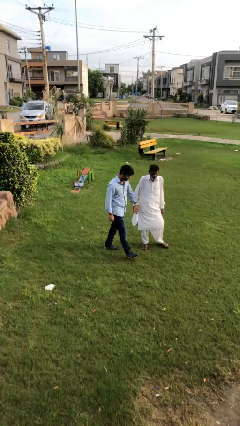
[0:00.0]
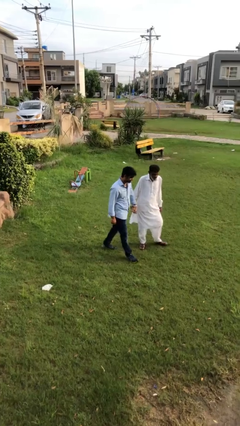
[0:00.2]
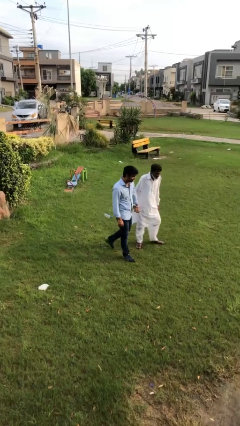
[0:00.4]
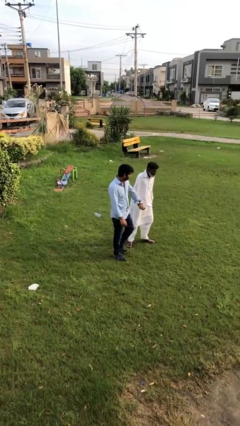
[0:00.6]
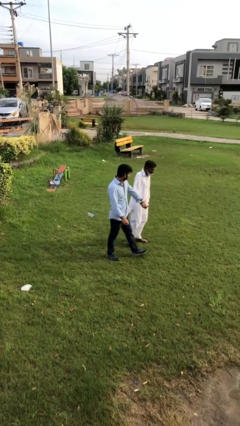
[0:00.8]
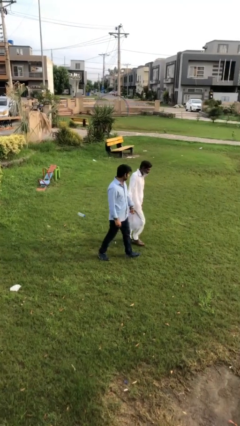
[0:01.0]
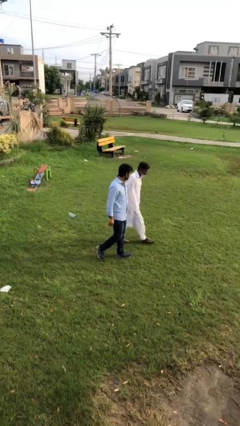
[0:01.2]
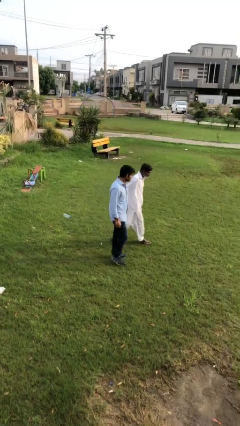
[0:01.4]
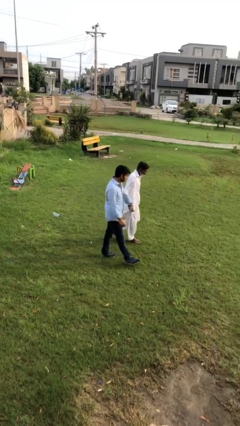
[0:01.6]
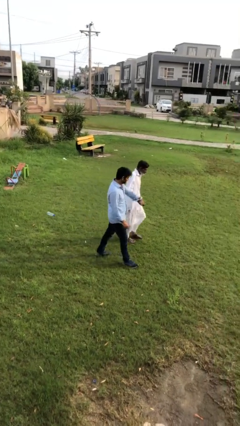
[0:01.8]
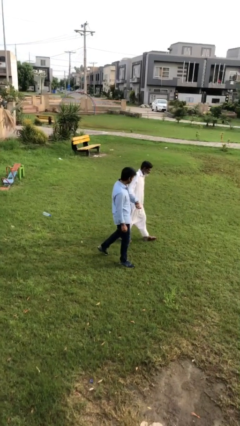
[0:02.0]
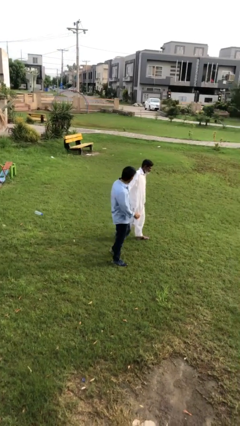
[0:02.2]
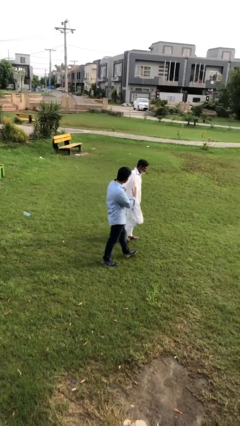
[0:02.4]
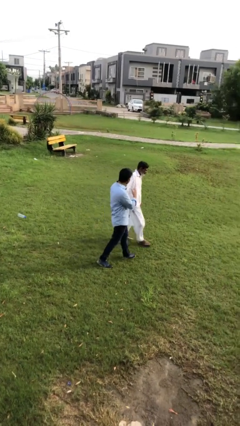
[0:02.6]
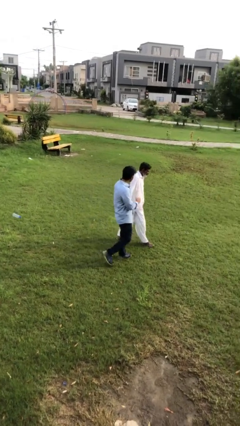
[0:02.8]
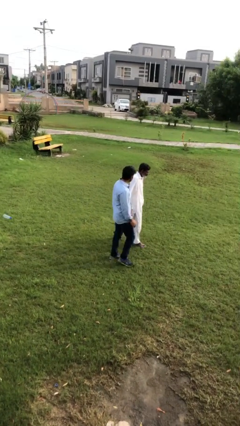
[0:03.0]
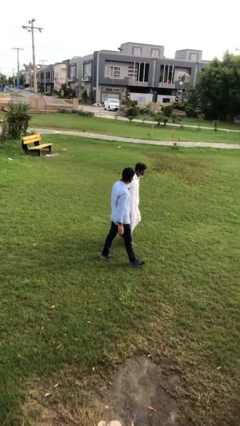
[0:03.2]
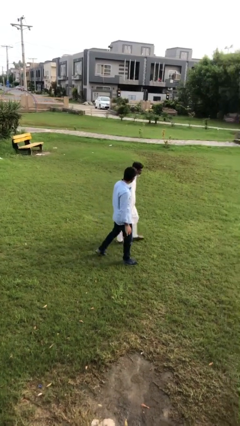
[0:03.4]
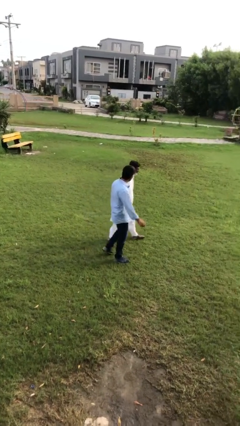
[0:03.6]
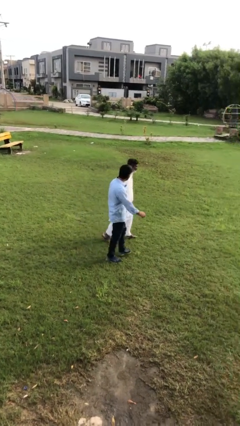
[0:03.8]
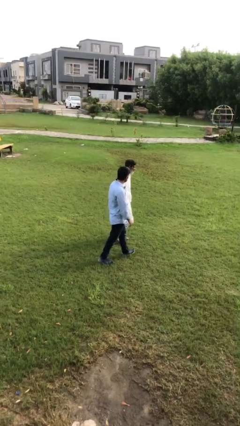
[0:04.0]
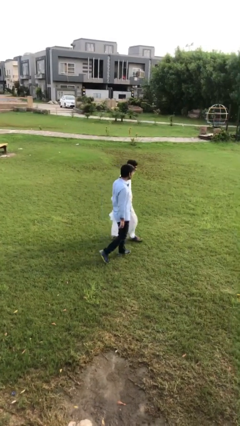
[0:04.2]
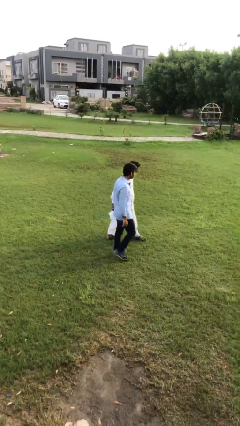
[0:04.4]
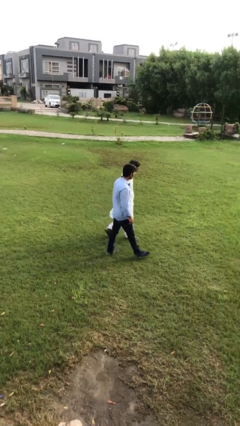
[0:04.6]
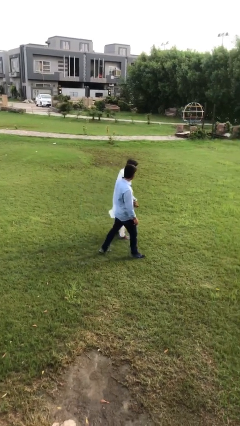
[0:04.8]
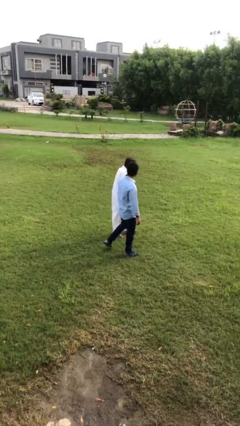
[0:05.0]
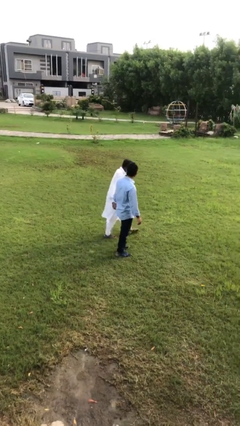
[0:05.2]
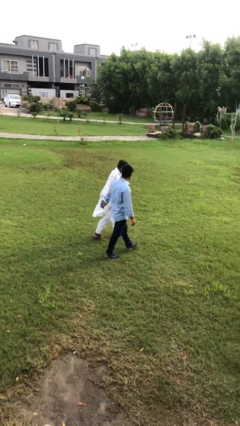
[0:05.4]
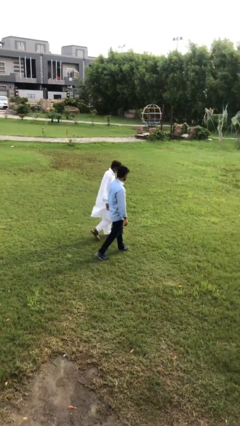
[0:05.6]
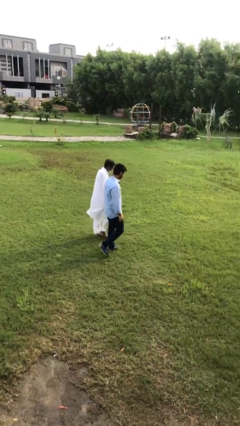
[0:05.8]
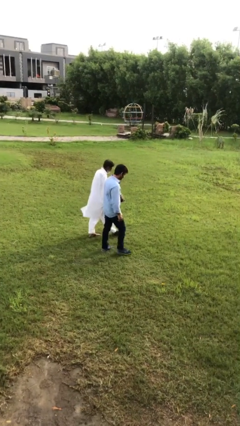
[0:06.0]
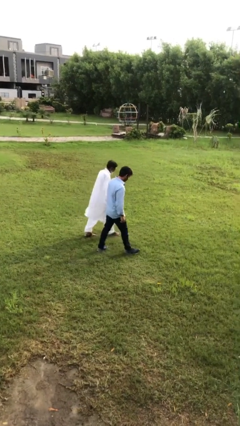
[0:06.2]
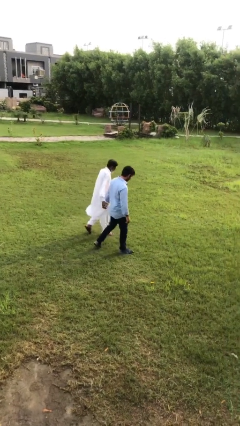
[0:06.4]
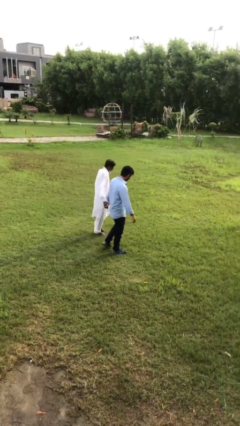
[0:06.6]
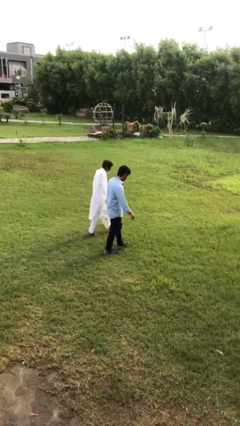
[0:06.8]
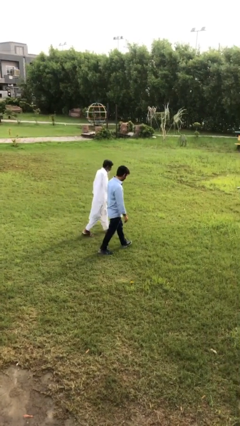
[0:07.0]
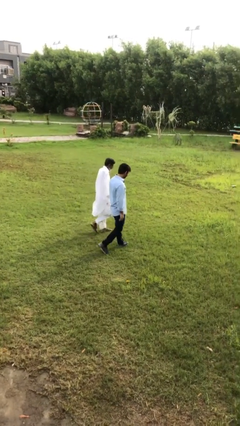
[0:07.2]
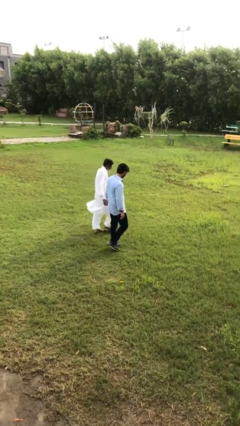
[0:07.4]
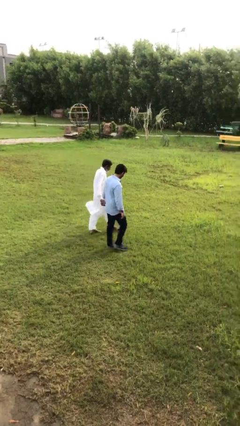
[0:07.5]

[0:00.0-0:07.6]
person holds hand

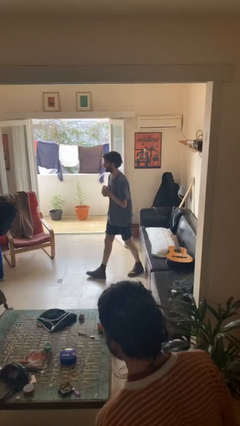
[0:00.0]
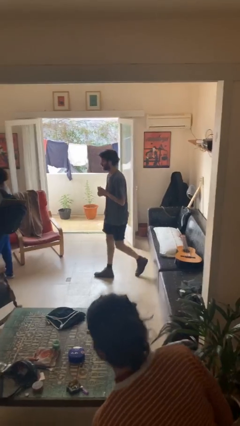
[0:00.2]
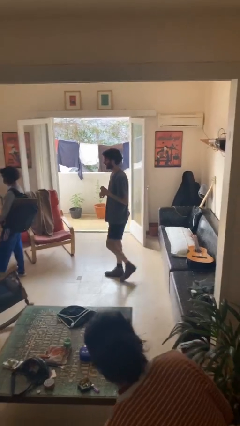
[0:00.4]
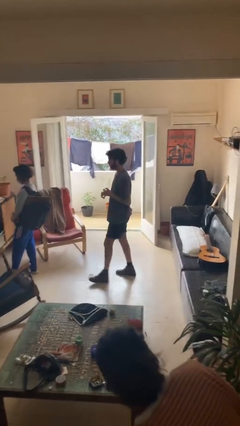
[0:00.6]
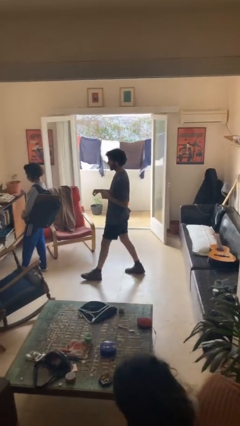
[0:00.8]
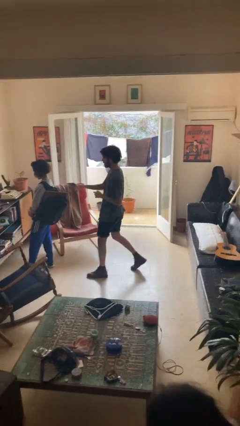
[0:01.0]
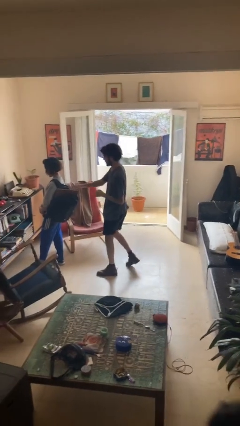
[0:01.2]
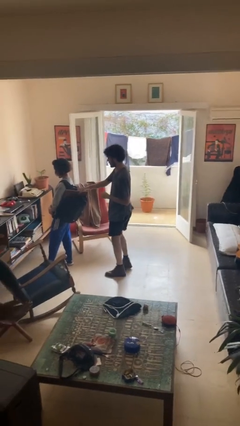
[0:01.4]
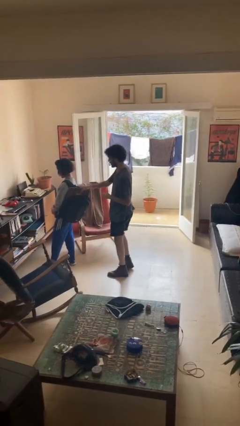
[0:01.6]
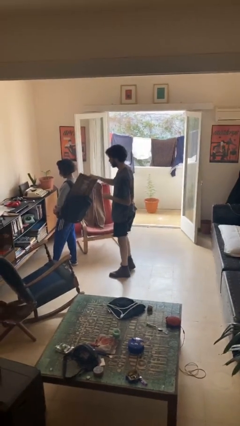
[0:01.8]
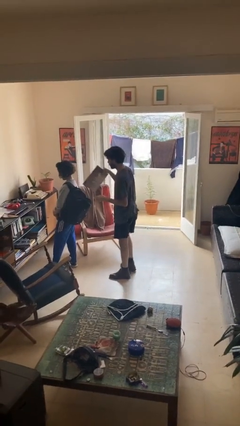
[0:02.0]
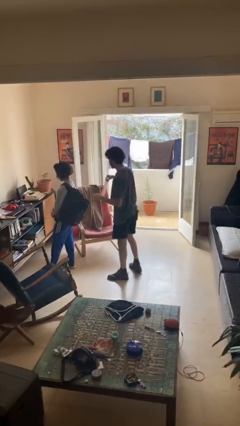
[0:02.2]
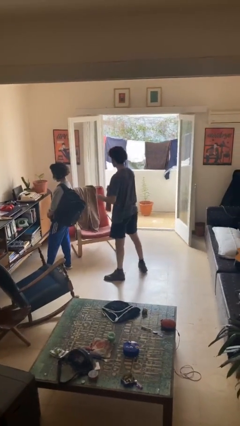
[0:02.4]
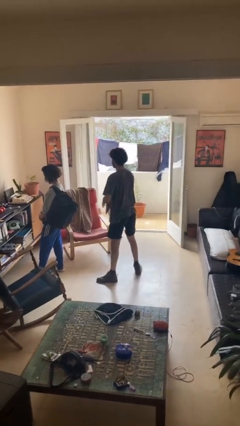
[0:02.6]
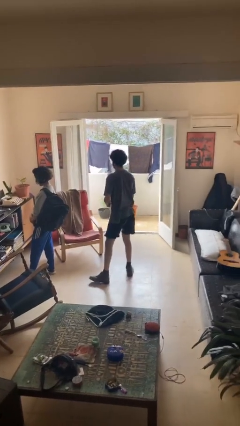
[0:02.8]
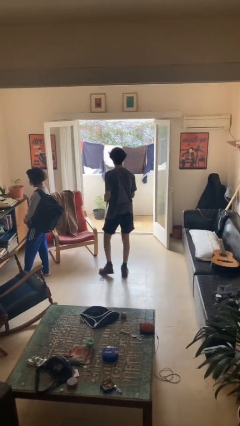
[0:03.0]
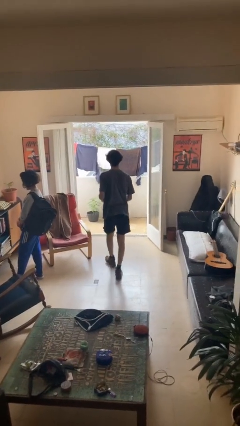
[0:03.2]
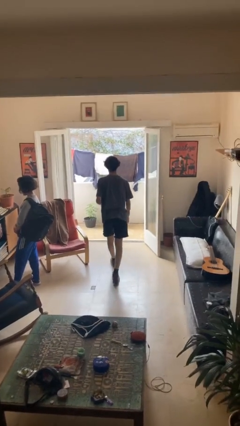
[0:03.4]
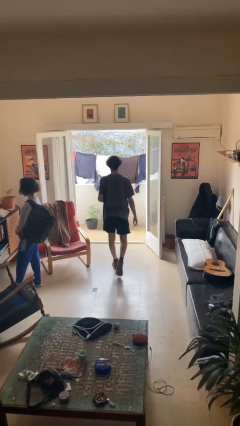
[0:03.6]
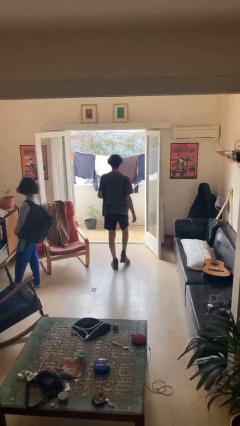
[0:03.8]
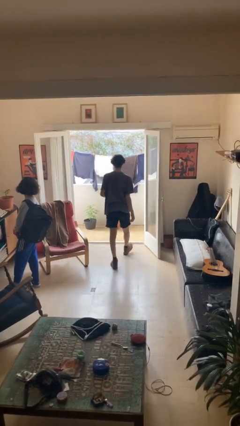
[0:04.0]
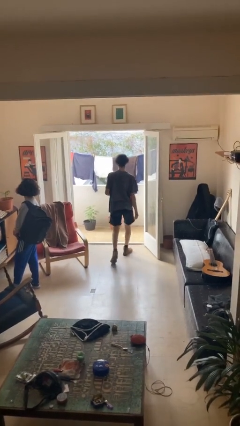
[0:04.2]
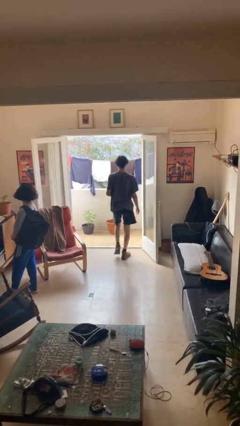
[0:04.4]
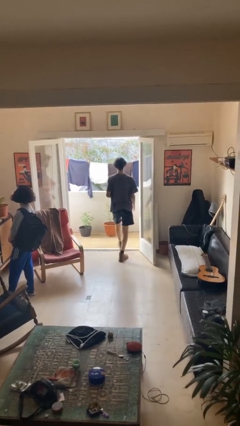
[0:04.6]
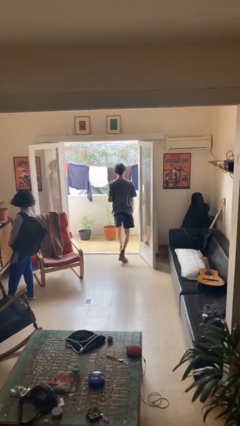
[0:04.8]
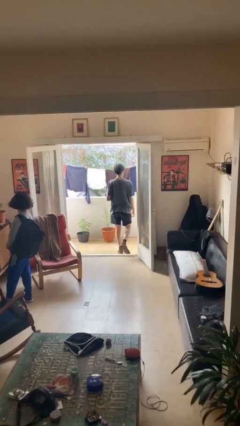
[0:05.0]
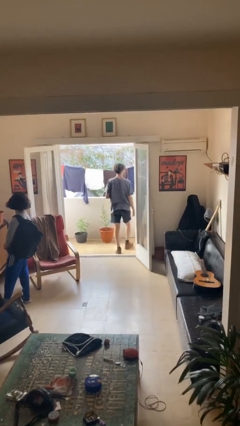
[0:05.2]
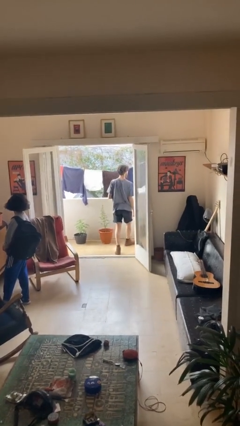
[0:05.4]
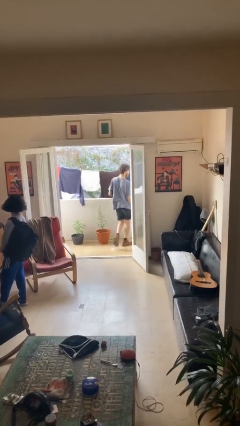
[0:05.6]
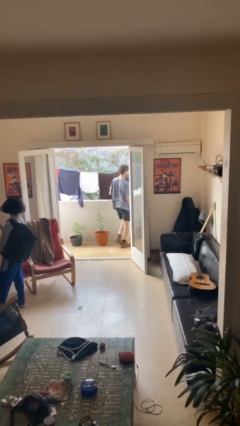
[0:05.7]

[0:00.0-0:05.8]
person steals object from person

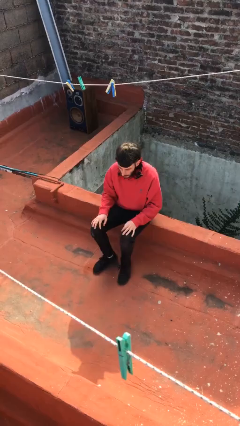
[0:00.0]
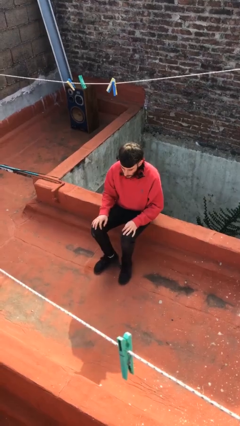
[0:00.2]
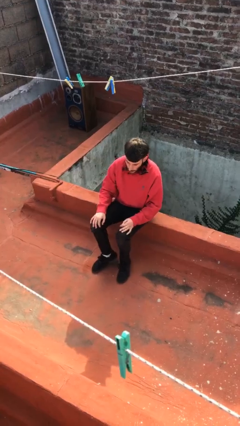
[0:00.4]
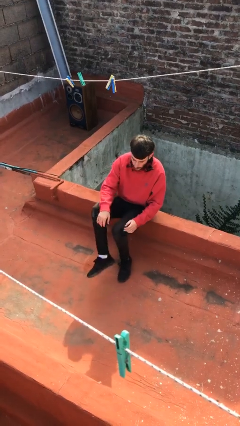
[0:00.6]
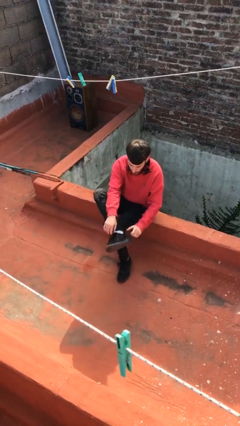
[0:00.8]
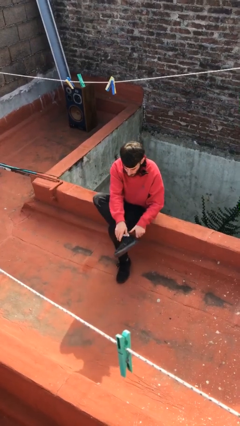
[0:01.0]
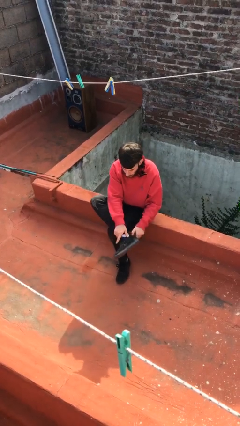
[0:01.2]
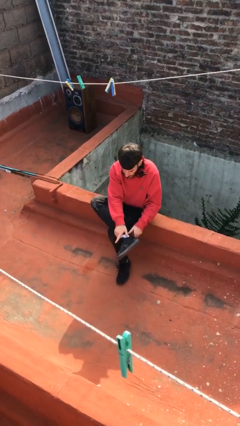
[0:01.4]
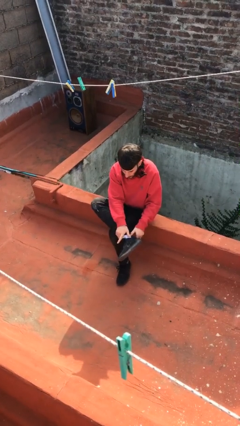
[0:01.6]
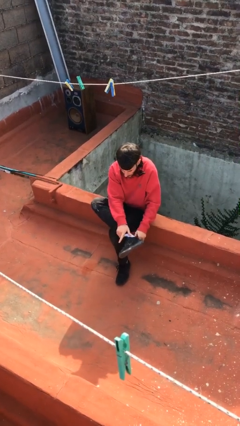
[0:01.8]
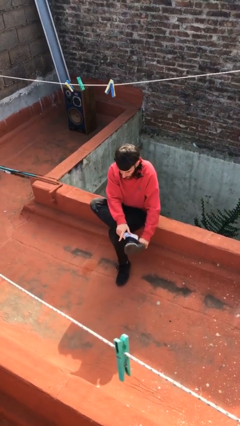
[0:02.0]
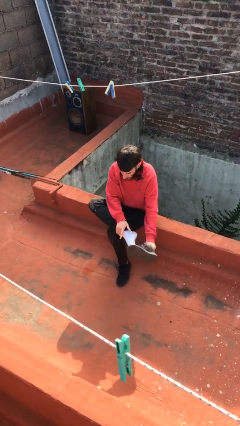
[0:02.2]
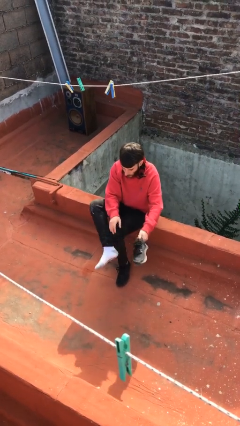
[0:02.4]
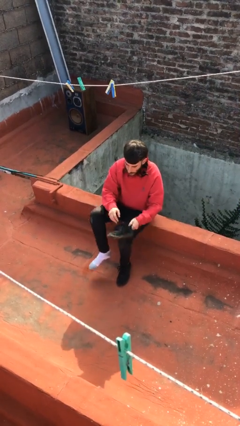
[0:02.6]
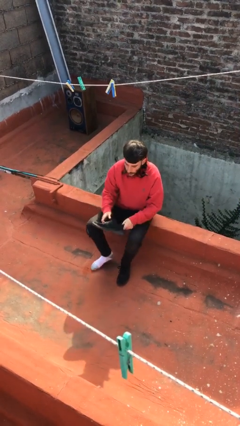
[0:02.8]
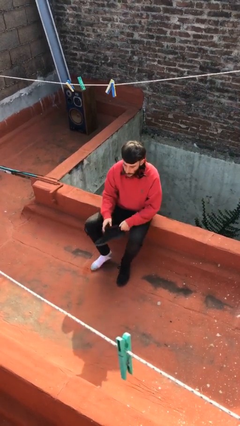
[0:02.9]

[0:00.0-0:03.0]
person takes off shoes

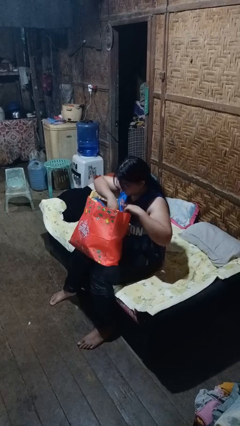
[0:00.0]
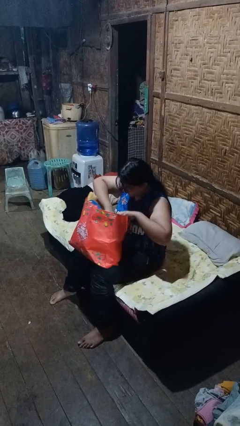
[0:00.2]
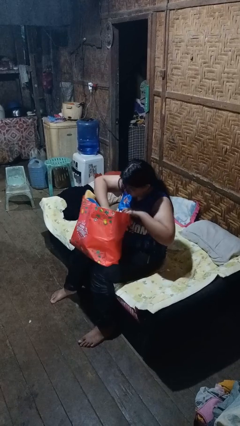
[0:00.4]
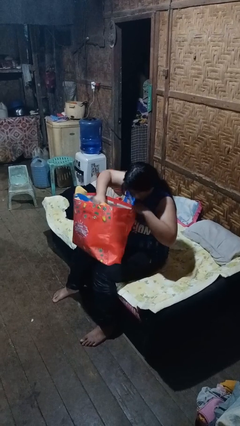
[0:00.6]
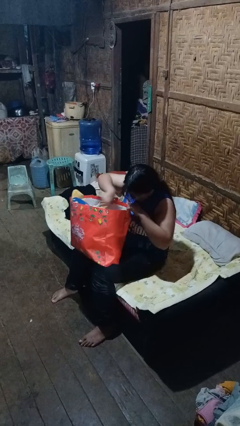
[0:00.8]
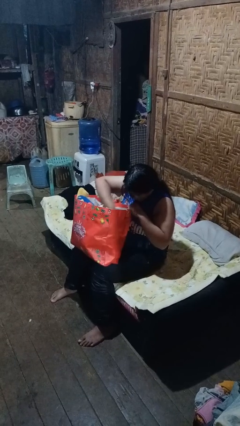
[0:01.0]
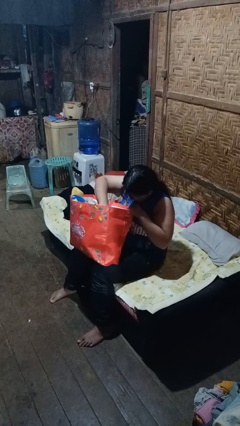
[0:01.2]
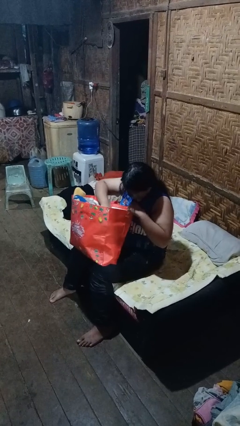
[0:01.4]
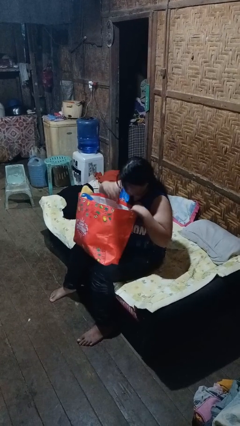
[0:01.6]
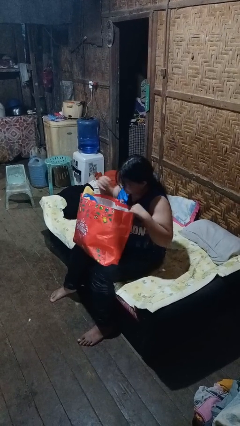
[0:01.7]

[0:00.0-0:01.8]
person searches in bag
